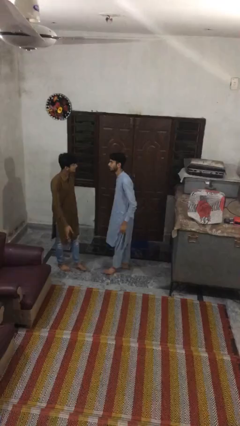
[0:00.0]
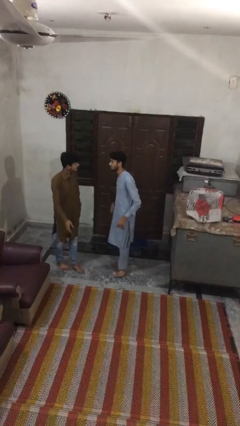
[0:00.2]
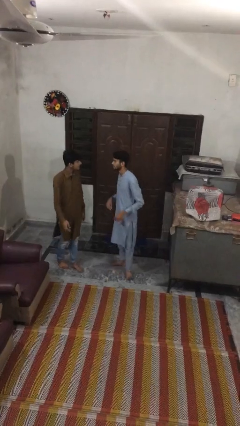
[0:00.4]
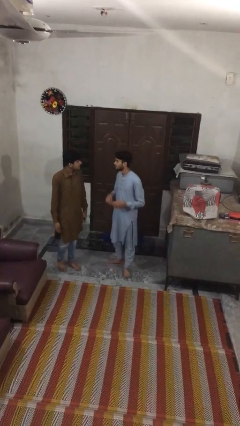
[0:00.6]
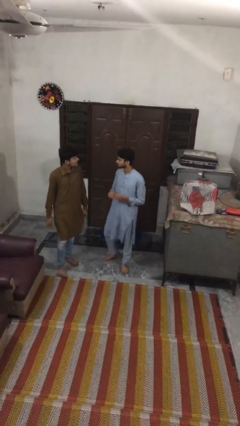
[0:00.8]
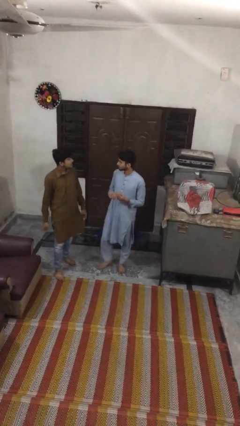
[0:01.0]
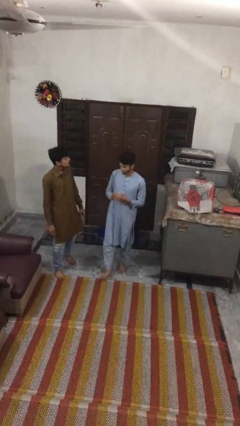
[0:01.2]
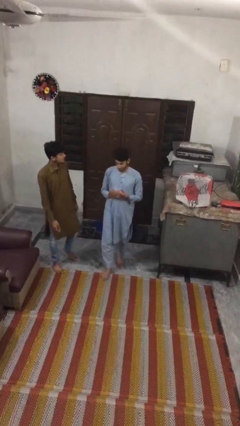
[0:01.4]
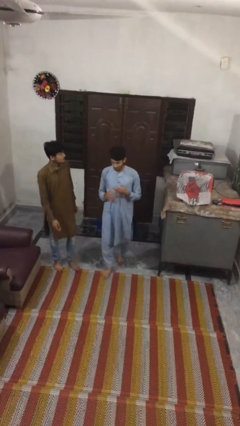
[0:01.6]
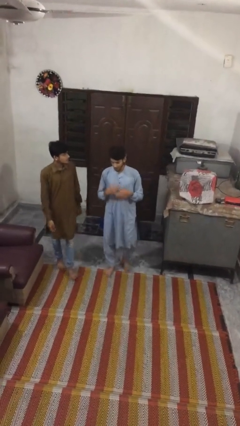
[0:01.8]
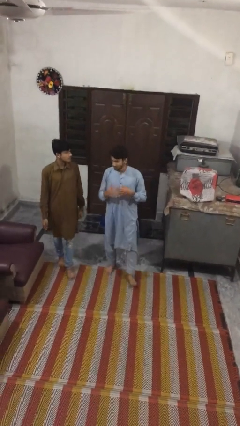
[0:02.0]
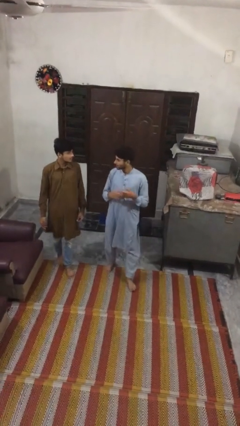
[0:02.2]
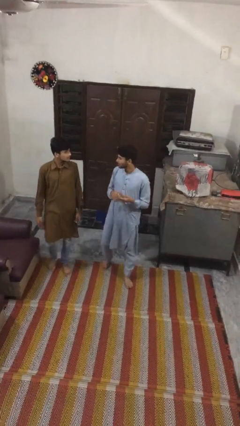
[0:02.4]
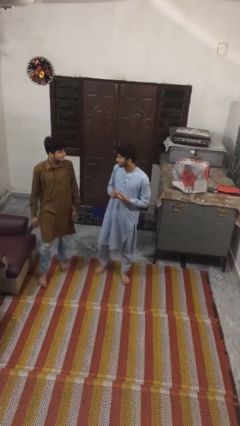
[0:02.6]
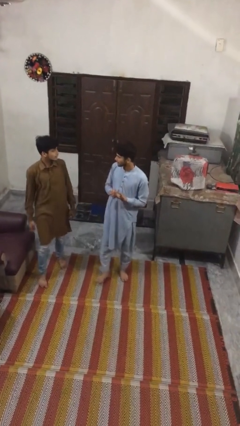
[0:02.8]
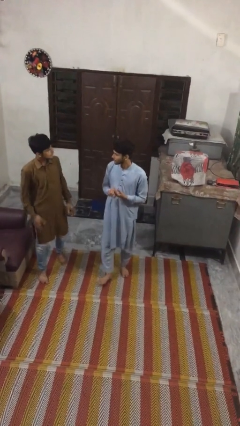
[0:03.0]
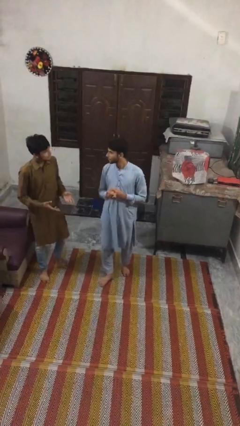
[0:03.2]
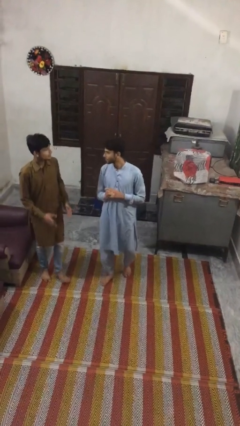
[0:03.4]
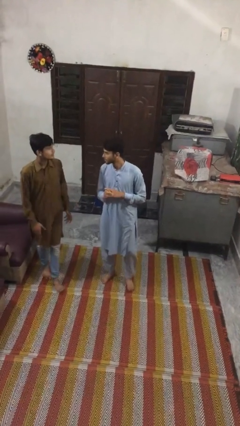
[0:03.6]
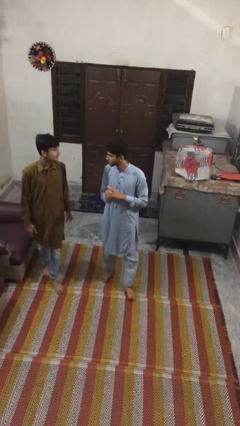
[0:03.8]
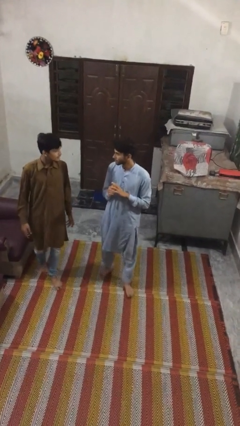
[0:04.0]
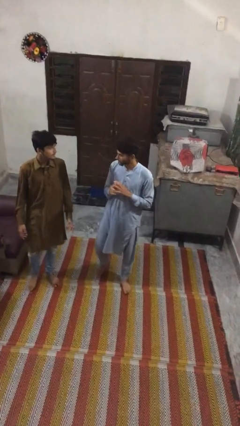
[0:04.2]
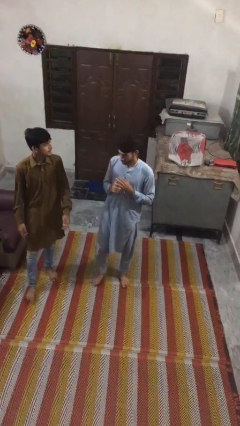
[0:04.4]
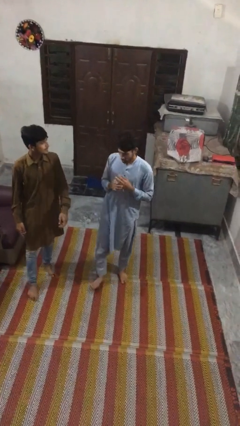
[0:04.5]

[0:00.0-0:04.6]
person talks to person

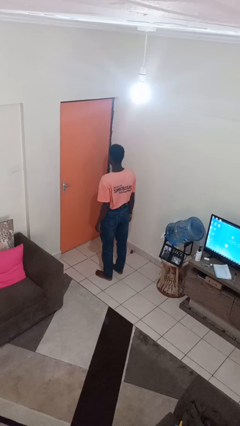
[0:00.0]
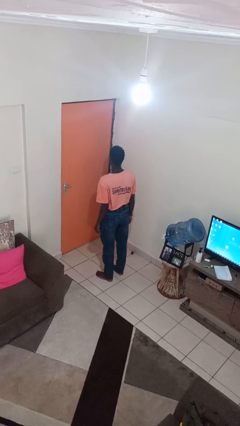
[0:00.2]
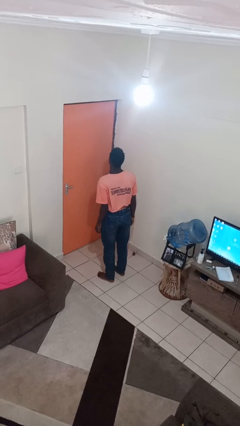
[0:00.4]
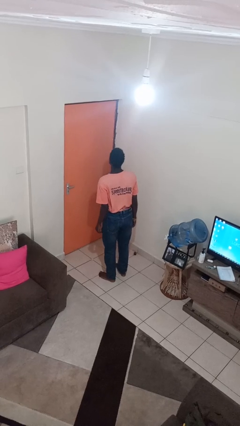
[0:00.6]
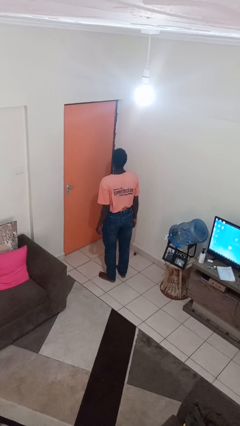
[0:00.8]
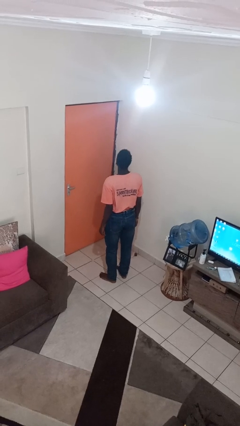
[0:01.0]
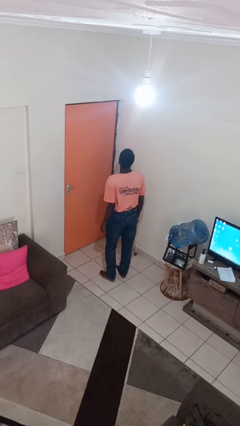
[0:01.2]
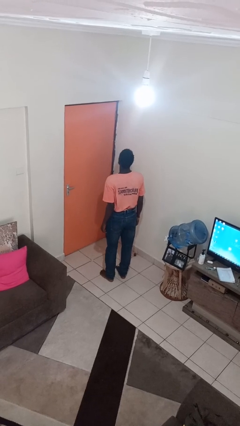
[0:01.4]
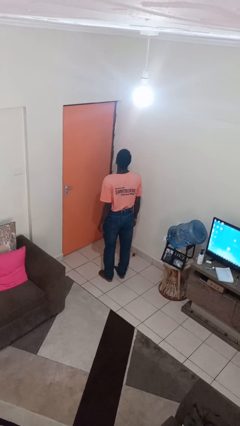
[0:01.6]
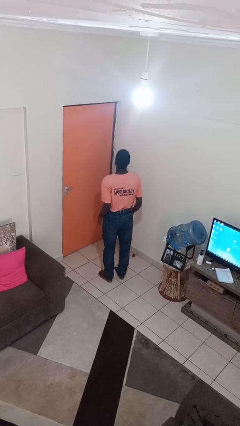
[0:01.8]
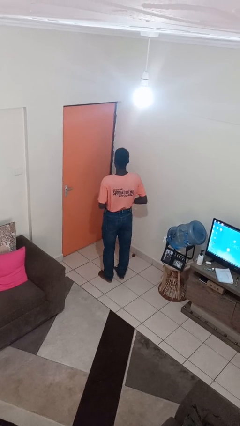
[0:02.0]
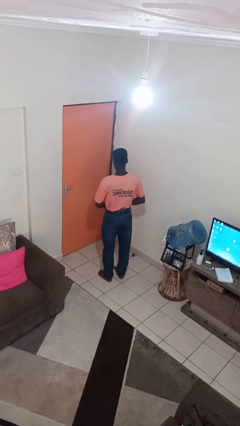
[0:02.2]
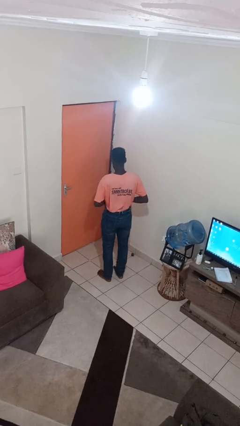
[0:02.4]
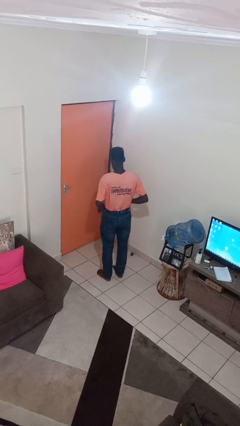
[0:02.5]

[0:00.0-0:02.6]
person hikes up pants

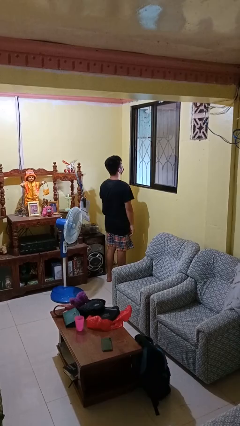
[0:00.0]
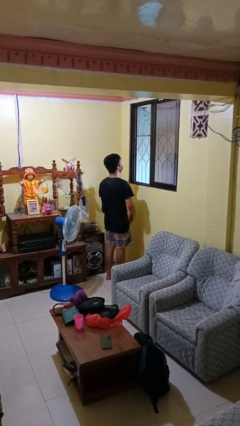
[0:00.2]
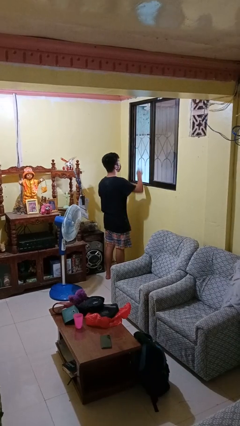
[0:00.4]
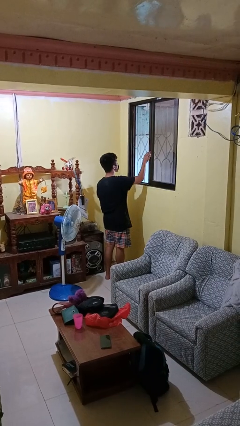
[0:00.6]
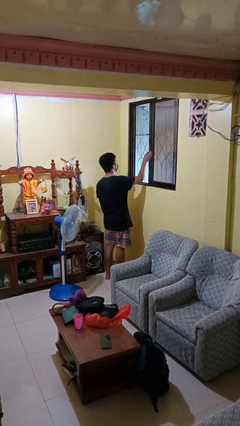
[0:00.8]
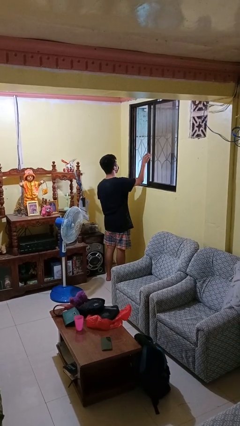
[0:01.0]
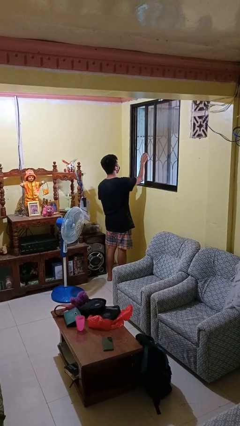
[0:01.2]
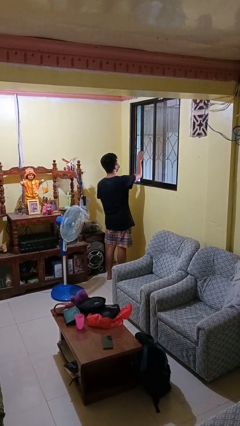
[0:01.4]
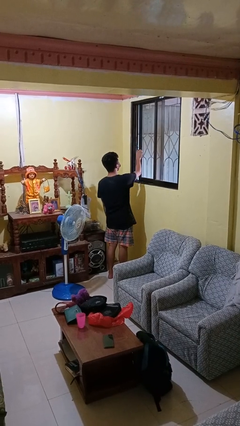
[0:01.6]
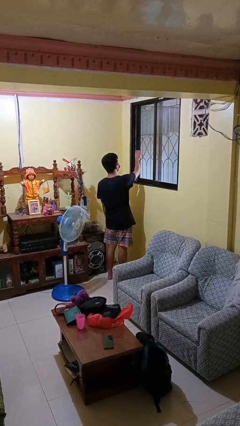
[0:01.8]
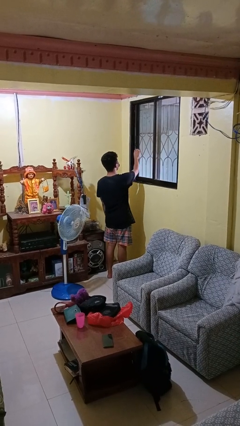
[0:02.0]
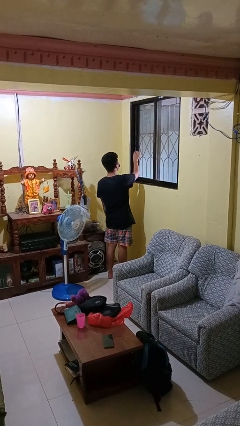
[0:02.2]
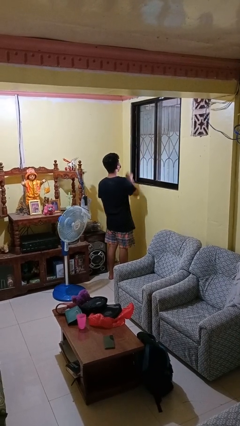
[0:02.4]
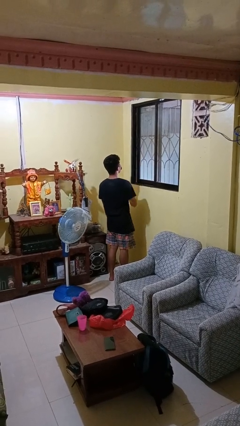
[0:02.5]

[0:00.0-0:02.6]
person closes home window

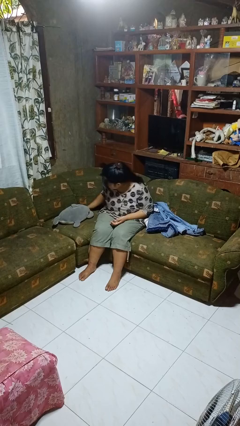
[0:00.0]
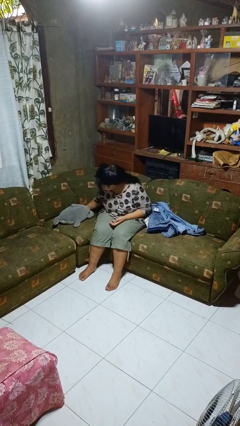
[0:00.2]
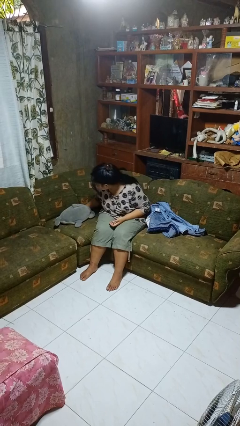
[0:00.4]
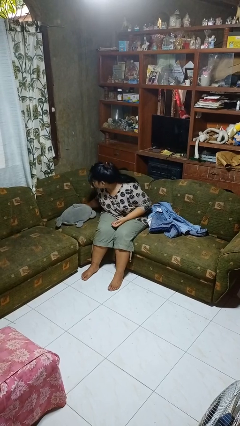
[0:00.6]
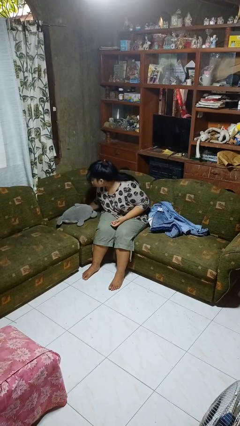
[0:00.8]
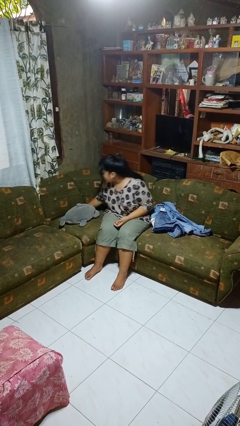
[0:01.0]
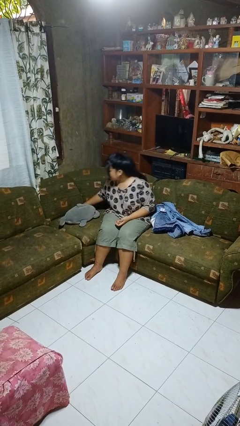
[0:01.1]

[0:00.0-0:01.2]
person searches in couch

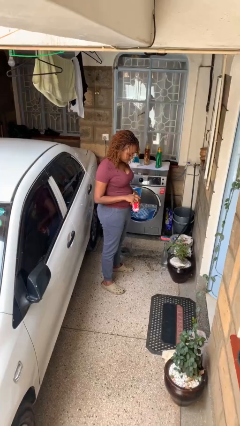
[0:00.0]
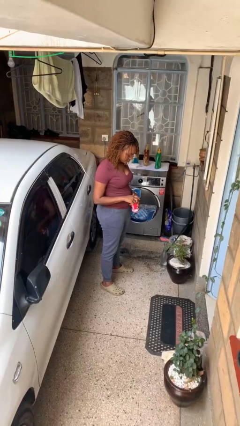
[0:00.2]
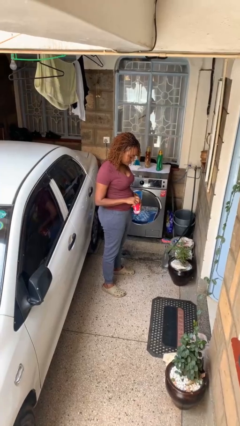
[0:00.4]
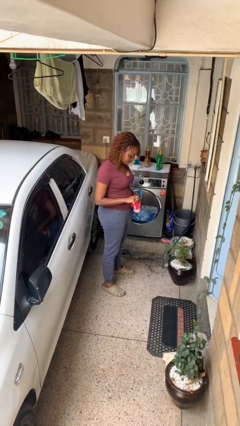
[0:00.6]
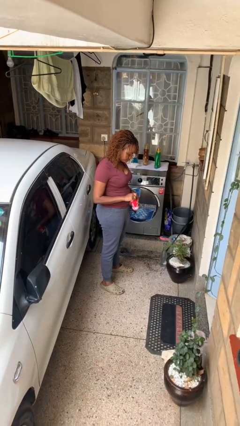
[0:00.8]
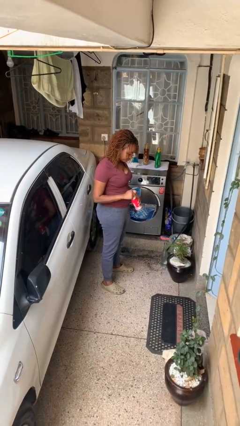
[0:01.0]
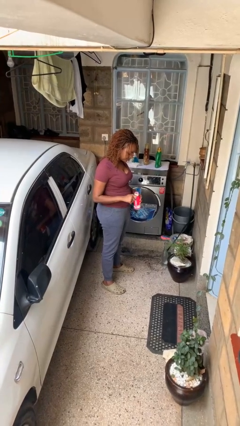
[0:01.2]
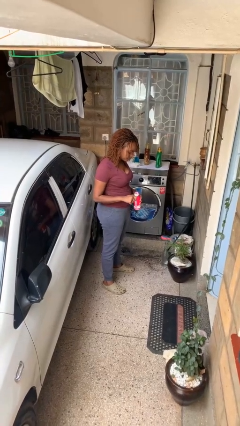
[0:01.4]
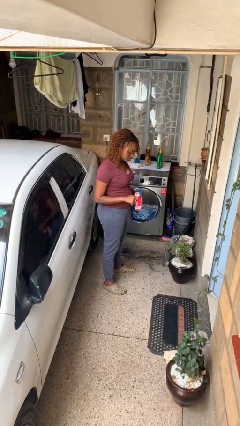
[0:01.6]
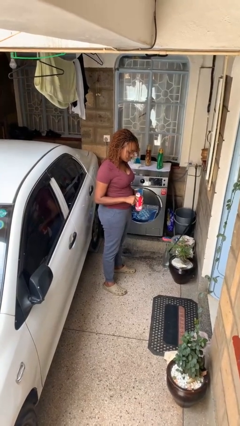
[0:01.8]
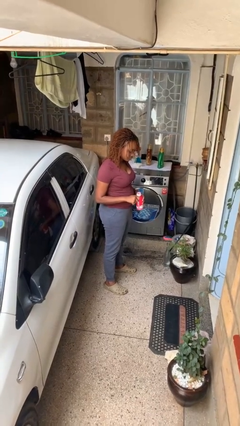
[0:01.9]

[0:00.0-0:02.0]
person opens beverage can

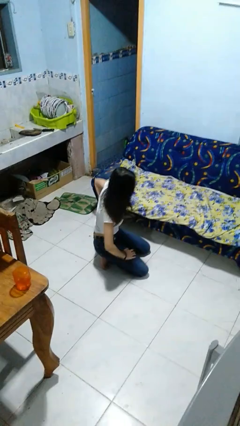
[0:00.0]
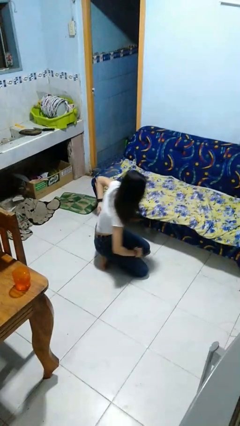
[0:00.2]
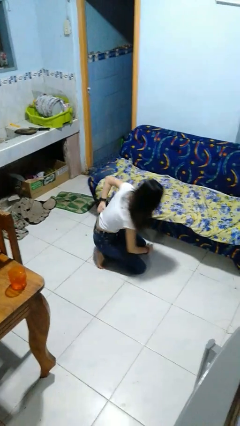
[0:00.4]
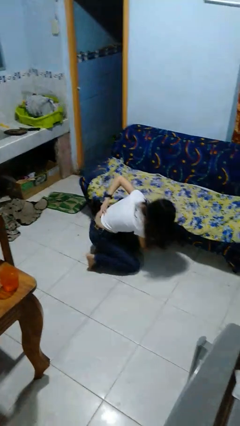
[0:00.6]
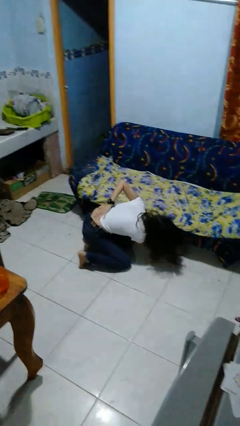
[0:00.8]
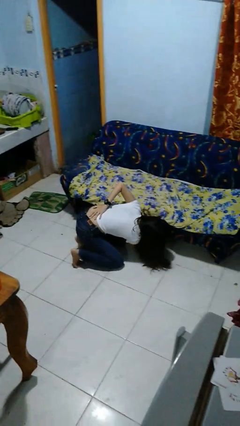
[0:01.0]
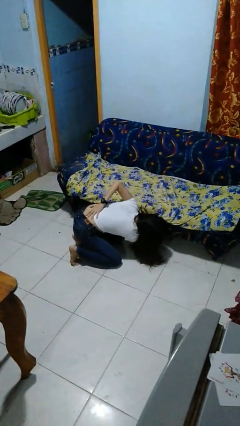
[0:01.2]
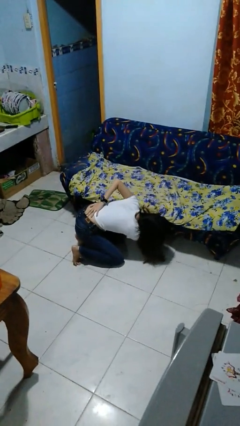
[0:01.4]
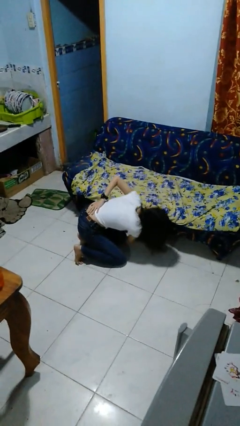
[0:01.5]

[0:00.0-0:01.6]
person searches under couch

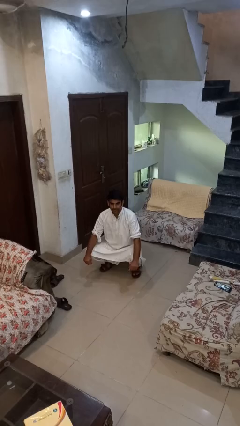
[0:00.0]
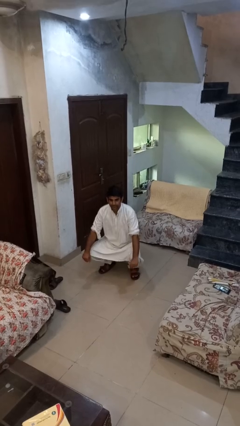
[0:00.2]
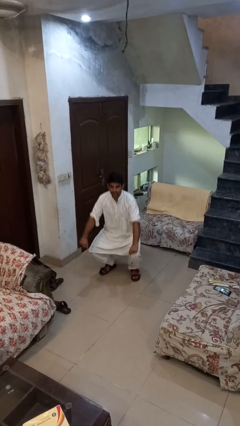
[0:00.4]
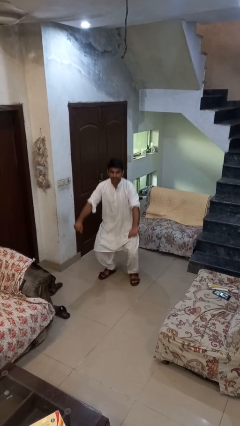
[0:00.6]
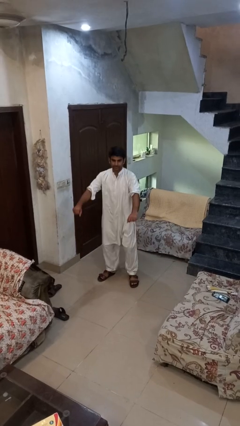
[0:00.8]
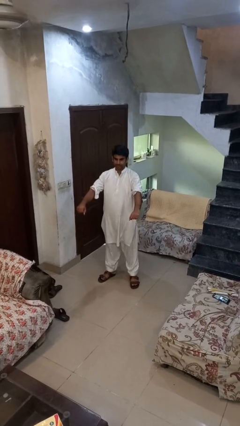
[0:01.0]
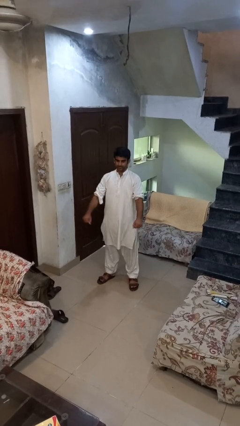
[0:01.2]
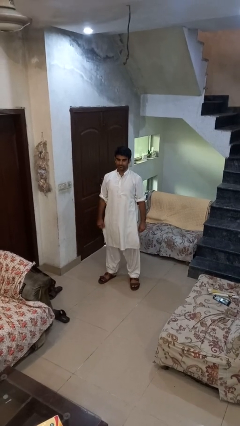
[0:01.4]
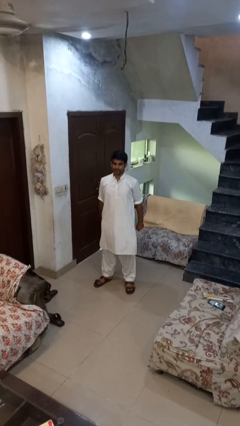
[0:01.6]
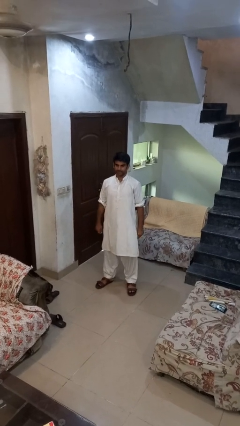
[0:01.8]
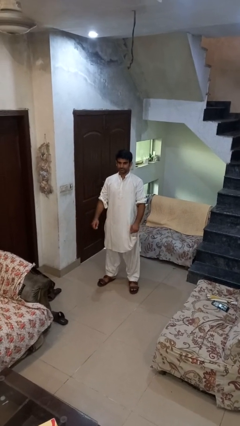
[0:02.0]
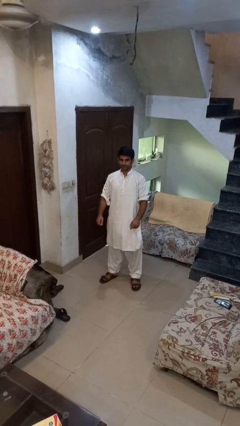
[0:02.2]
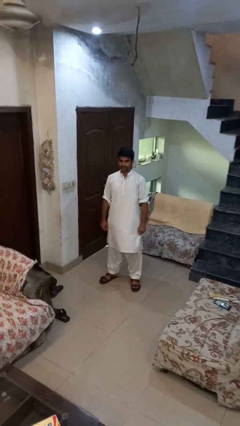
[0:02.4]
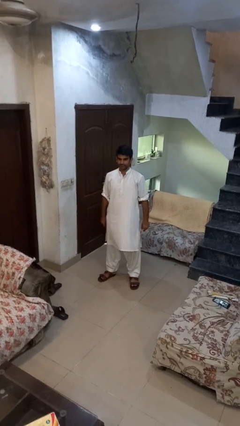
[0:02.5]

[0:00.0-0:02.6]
person stands up
